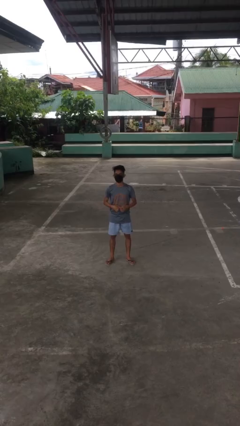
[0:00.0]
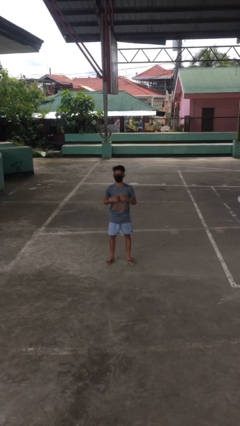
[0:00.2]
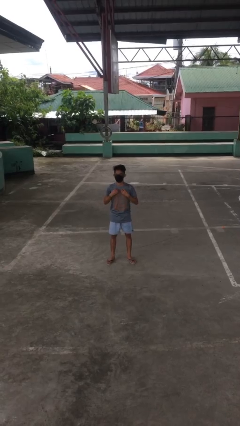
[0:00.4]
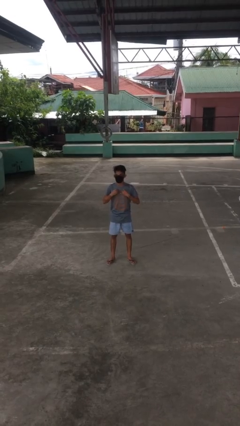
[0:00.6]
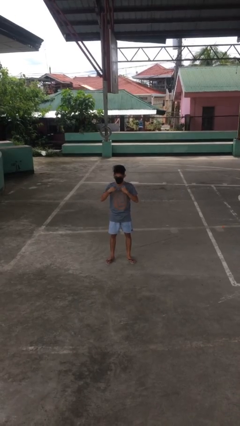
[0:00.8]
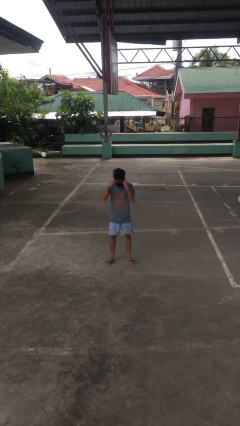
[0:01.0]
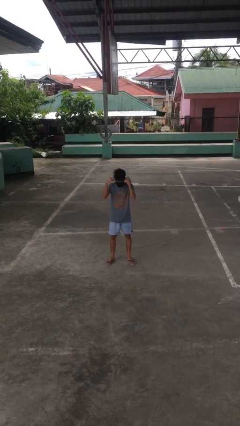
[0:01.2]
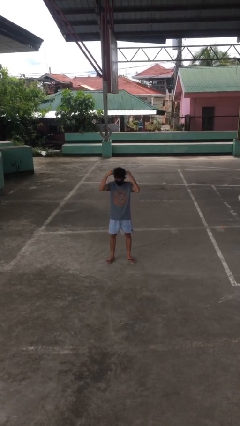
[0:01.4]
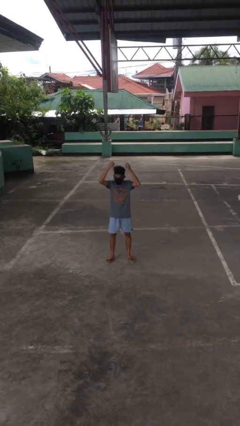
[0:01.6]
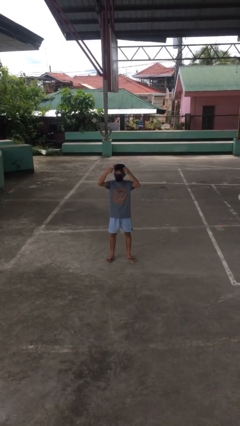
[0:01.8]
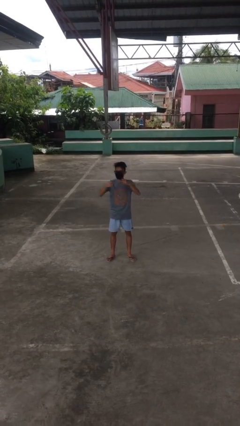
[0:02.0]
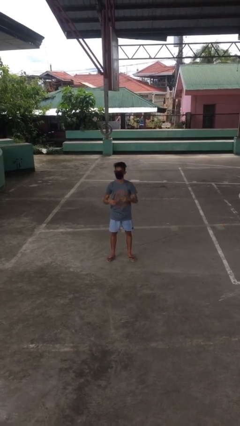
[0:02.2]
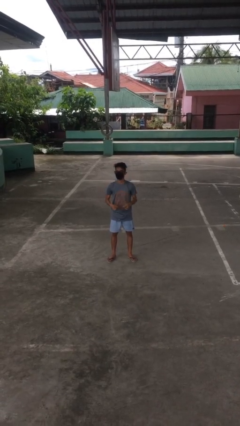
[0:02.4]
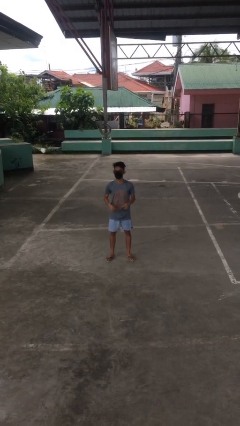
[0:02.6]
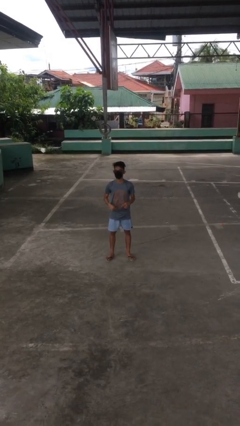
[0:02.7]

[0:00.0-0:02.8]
person takes off necklace

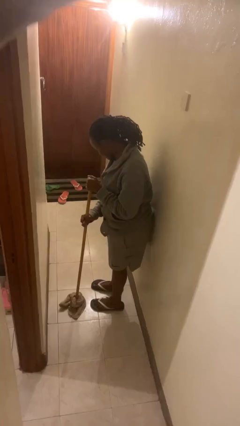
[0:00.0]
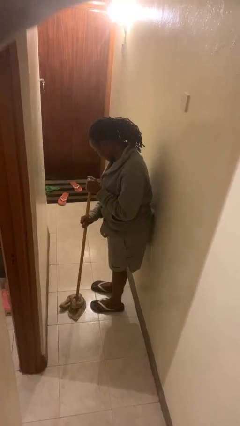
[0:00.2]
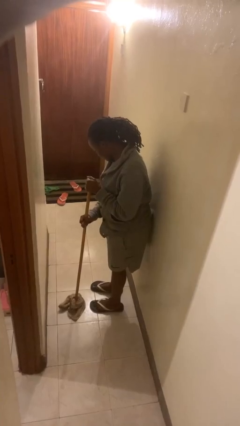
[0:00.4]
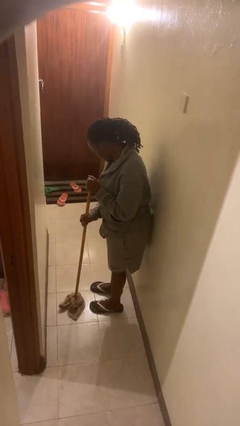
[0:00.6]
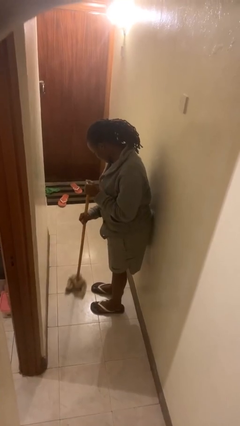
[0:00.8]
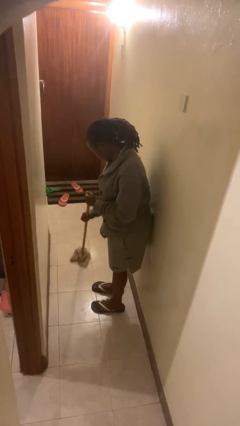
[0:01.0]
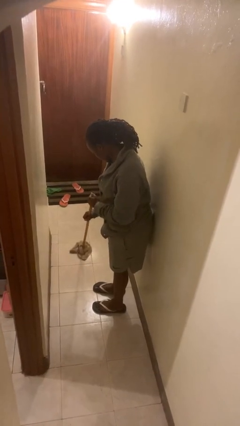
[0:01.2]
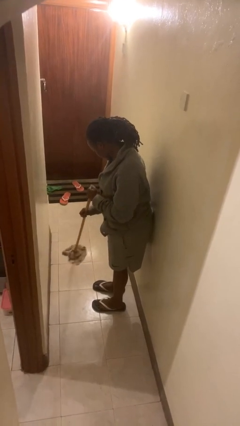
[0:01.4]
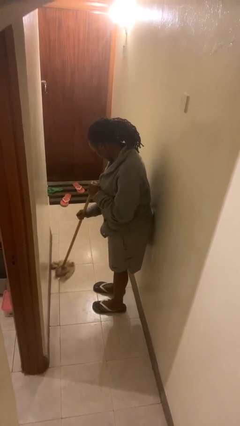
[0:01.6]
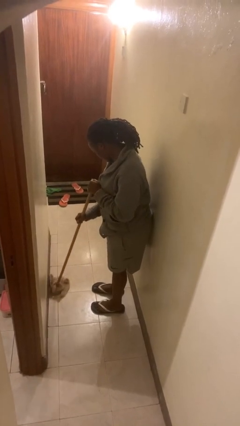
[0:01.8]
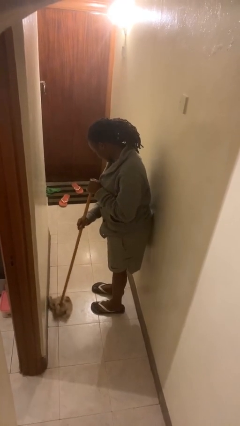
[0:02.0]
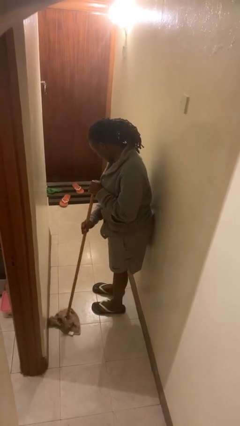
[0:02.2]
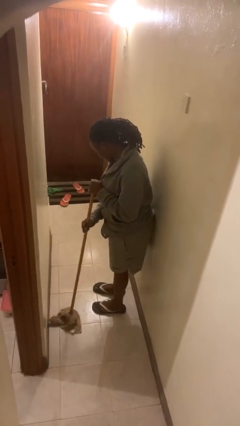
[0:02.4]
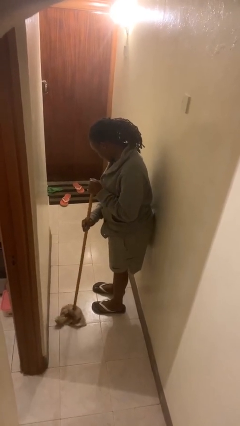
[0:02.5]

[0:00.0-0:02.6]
person mops

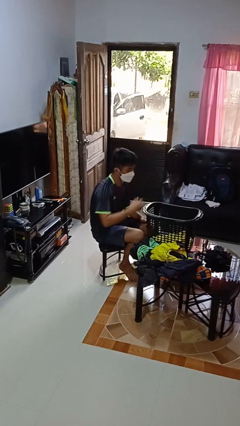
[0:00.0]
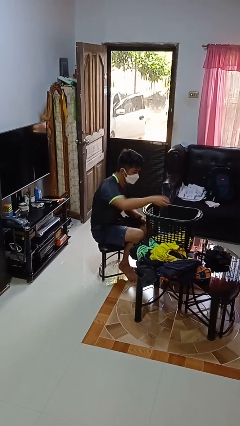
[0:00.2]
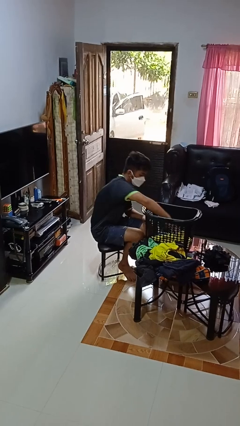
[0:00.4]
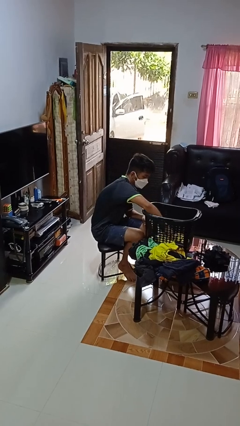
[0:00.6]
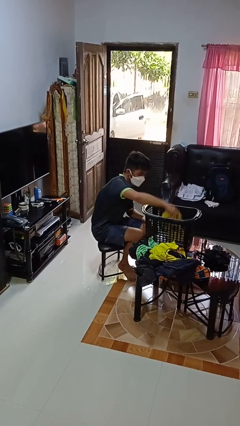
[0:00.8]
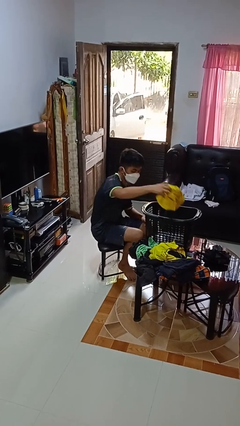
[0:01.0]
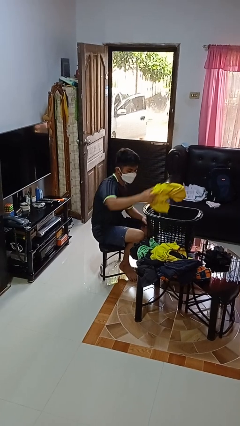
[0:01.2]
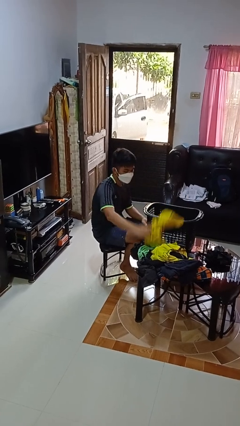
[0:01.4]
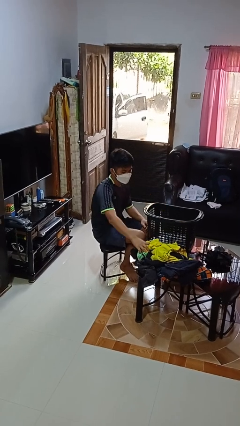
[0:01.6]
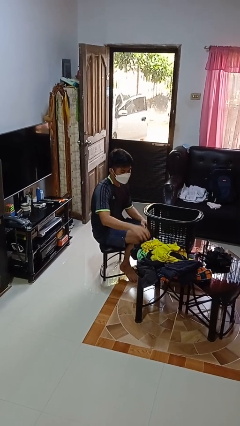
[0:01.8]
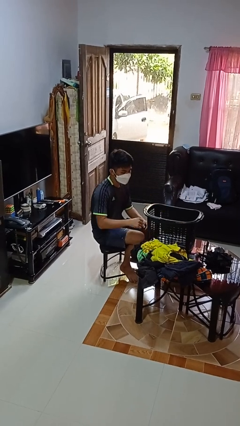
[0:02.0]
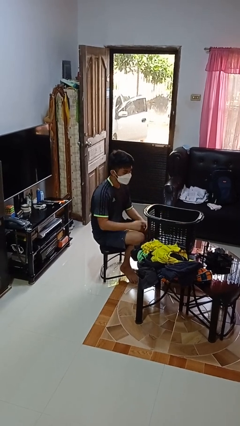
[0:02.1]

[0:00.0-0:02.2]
person takes object from basket

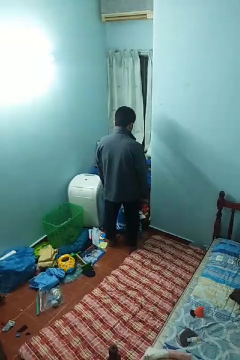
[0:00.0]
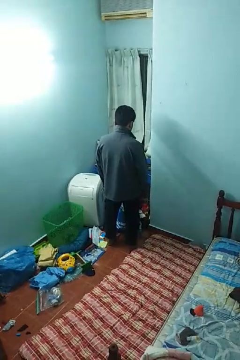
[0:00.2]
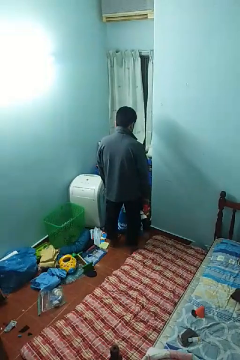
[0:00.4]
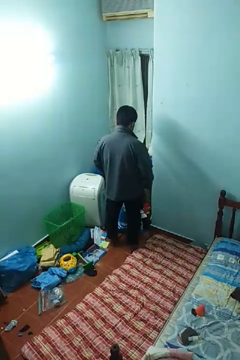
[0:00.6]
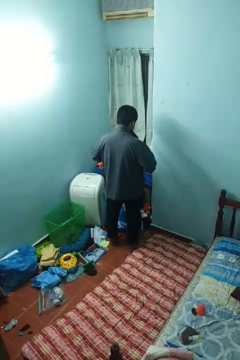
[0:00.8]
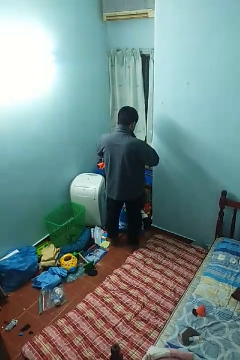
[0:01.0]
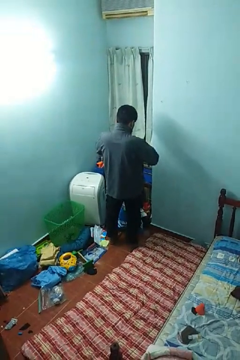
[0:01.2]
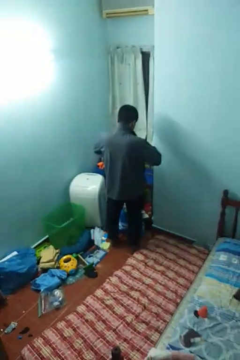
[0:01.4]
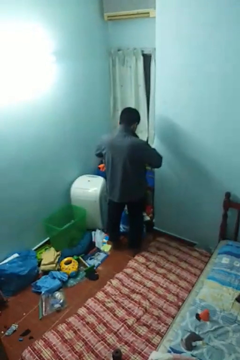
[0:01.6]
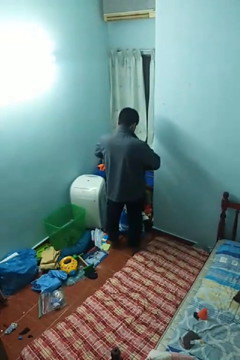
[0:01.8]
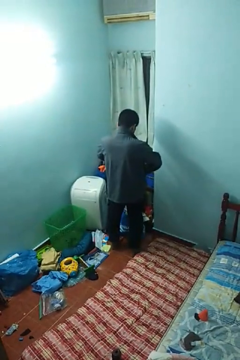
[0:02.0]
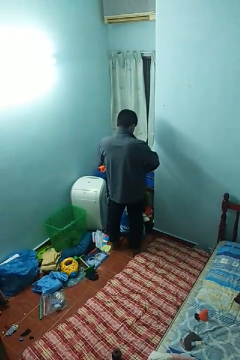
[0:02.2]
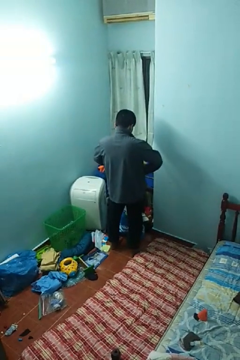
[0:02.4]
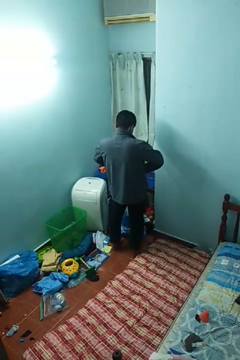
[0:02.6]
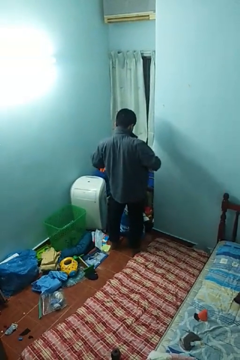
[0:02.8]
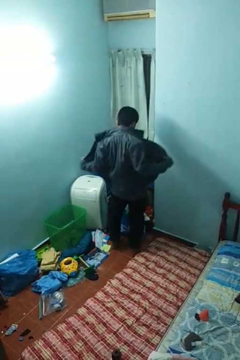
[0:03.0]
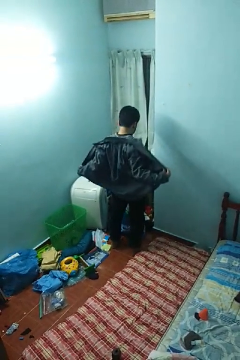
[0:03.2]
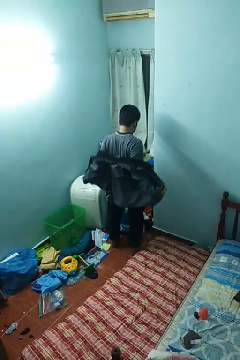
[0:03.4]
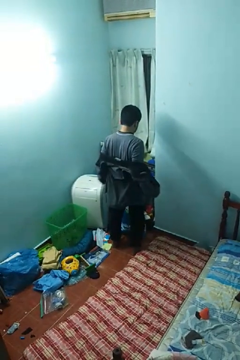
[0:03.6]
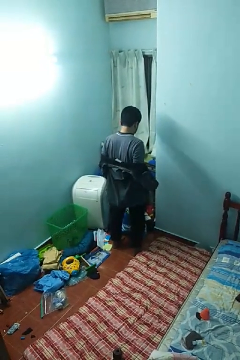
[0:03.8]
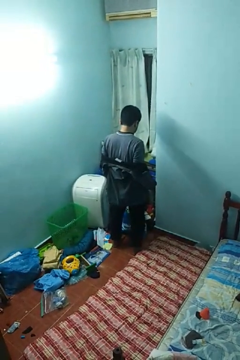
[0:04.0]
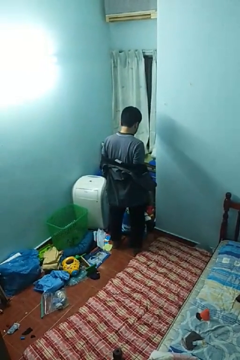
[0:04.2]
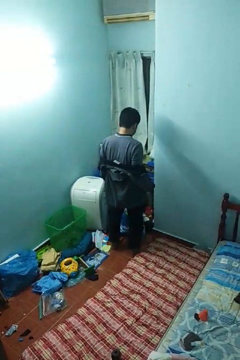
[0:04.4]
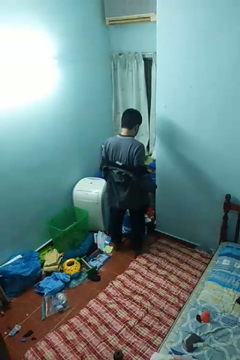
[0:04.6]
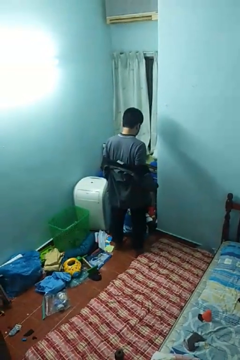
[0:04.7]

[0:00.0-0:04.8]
person unbuttons shirt

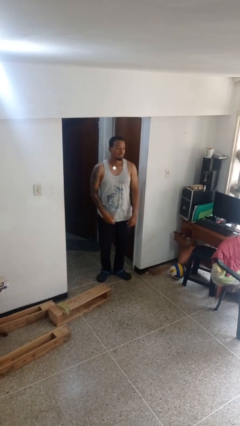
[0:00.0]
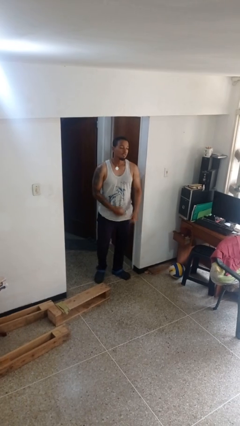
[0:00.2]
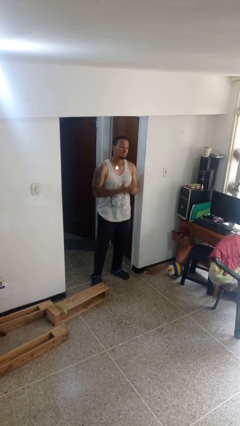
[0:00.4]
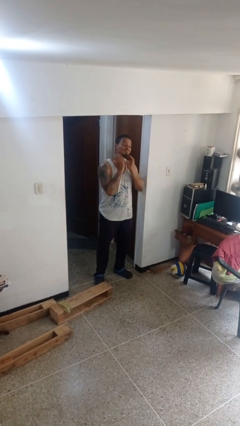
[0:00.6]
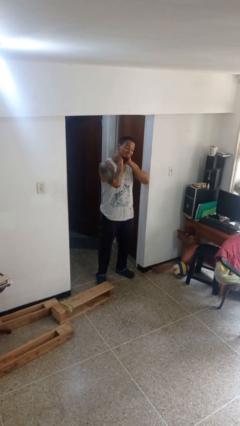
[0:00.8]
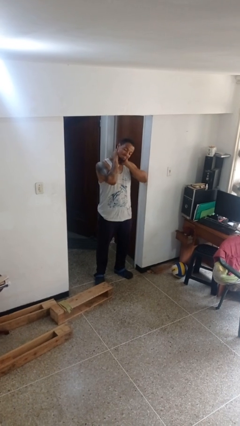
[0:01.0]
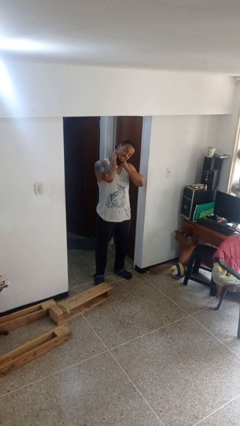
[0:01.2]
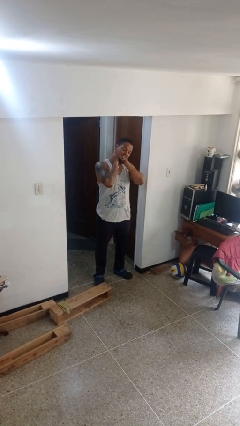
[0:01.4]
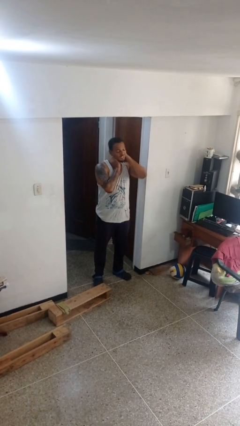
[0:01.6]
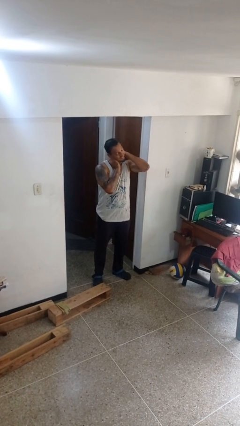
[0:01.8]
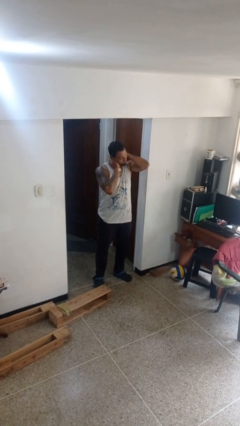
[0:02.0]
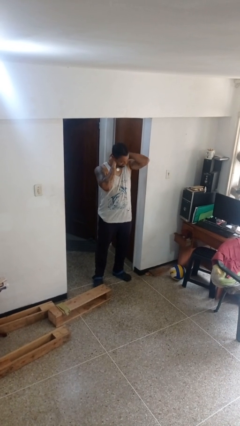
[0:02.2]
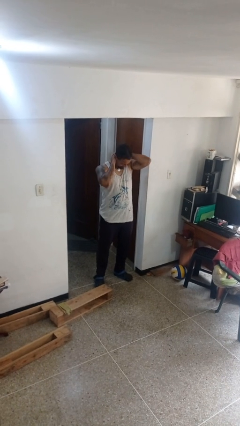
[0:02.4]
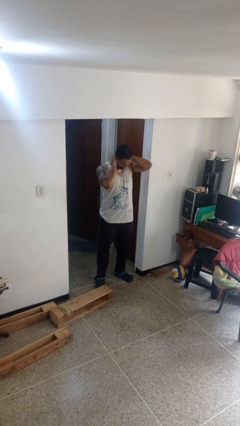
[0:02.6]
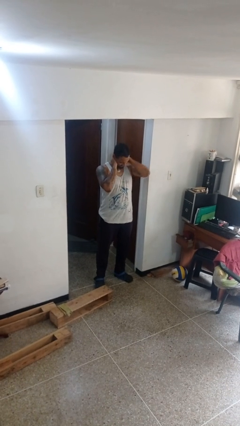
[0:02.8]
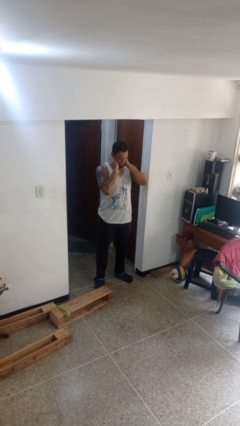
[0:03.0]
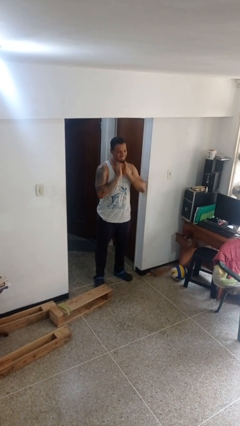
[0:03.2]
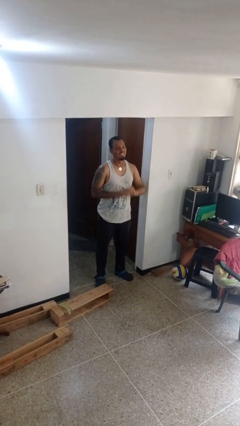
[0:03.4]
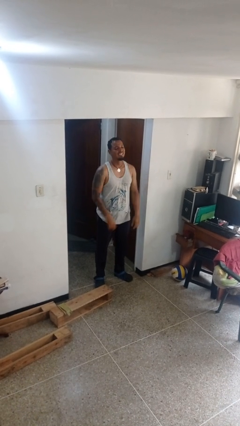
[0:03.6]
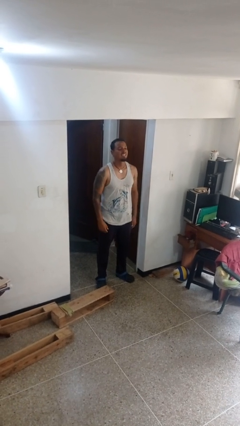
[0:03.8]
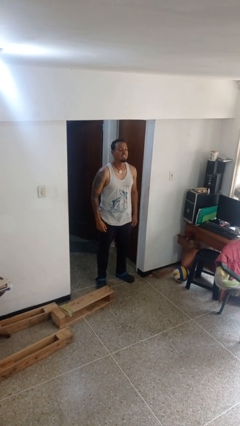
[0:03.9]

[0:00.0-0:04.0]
person rubs neck

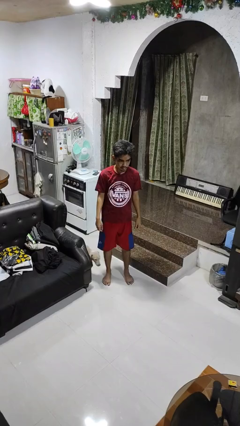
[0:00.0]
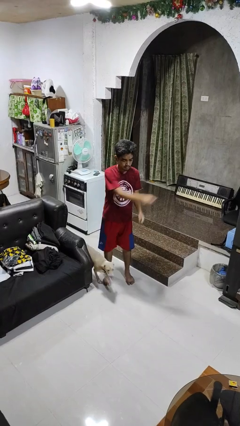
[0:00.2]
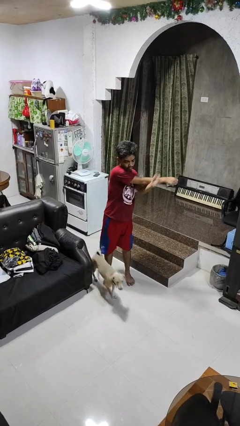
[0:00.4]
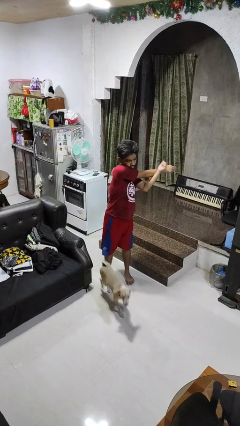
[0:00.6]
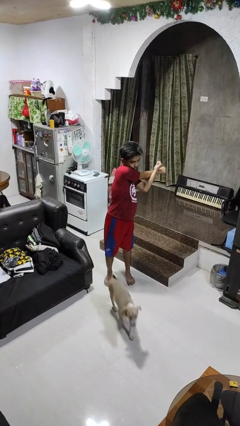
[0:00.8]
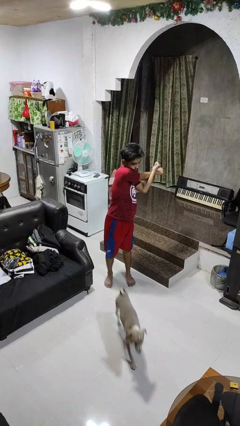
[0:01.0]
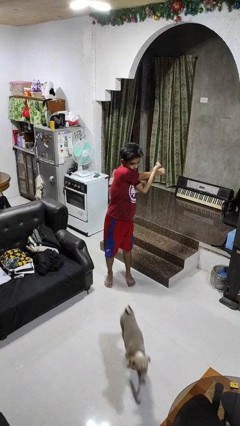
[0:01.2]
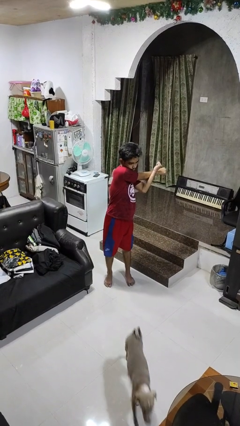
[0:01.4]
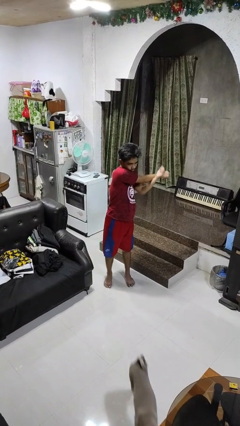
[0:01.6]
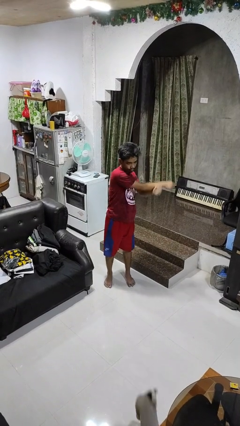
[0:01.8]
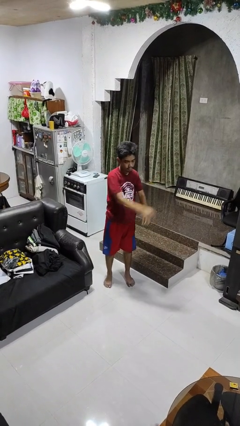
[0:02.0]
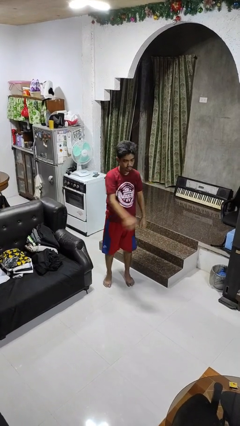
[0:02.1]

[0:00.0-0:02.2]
person stretches arms to side
